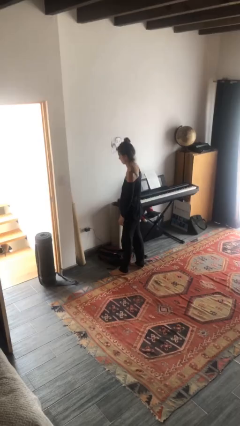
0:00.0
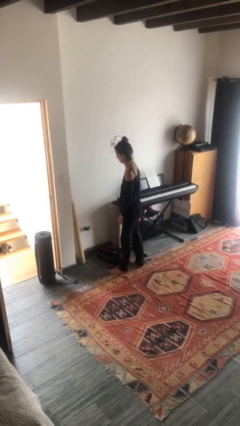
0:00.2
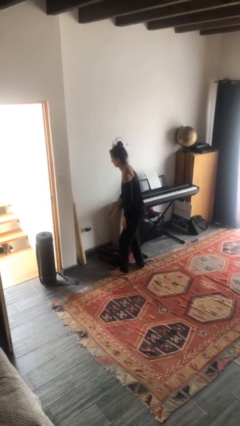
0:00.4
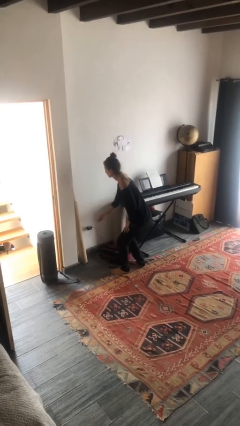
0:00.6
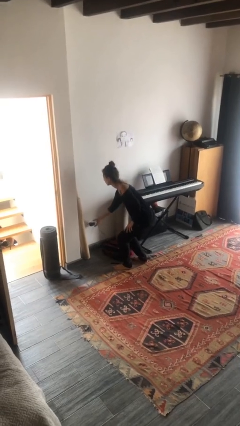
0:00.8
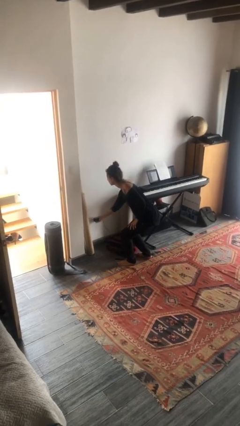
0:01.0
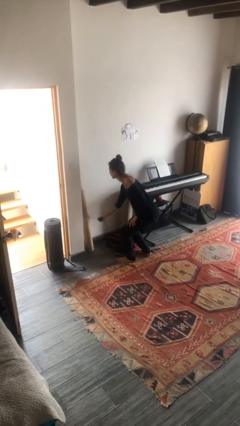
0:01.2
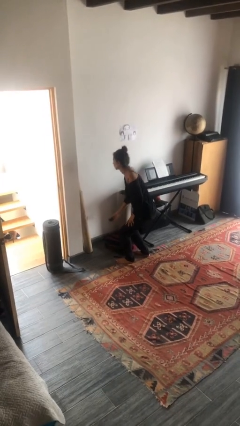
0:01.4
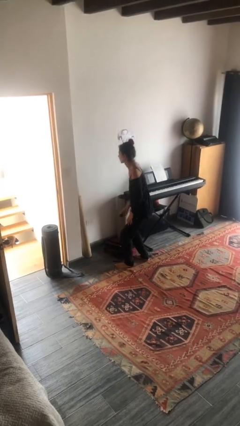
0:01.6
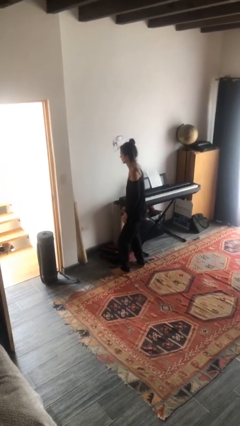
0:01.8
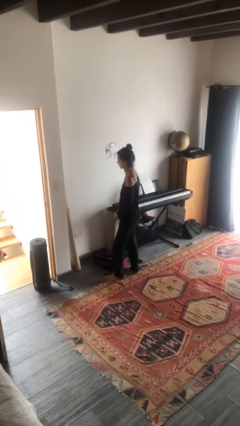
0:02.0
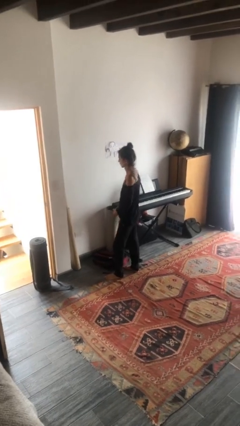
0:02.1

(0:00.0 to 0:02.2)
person unplugs from electrical socket

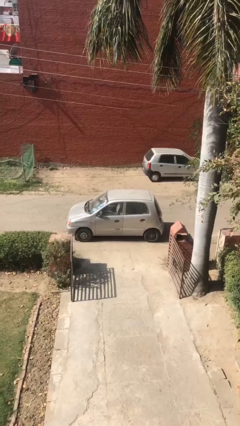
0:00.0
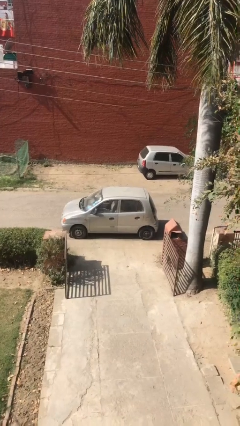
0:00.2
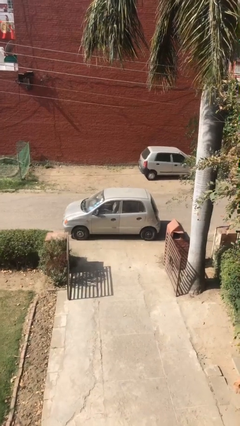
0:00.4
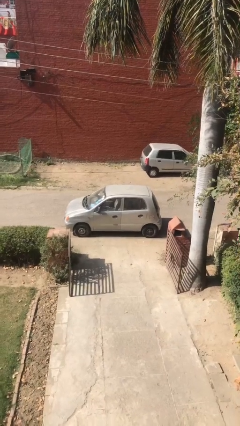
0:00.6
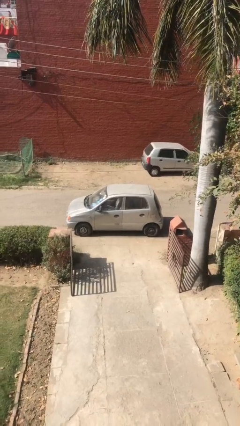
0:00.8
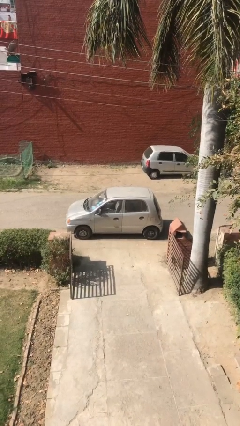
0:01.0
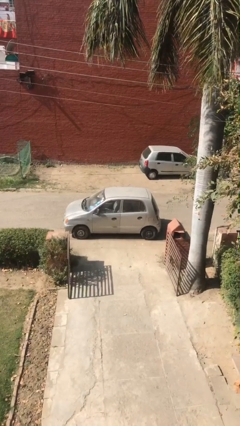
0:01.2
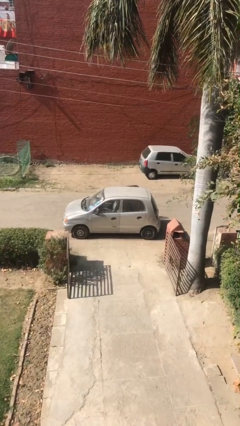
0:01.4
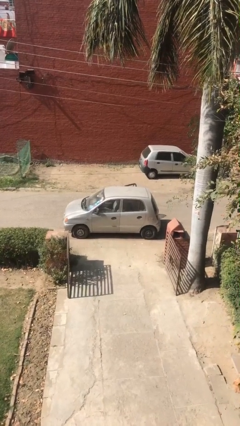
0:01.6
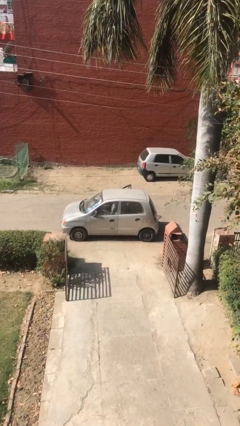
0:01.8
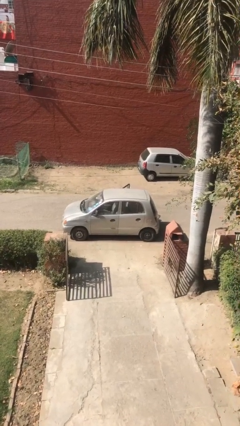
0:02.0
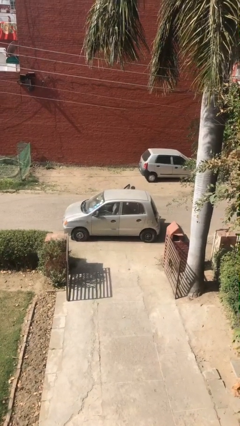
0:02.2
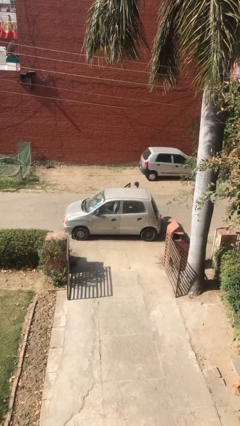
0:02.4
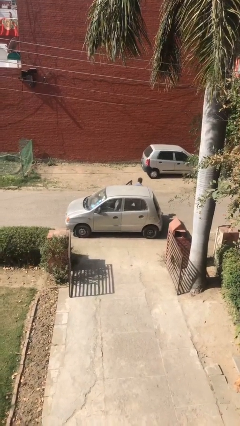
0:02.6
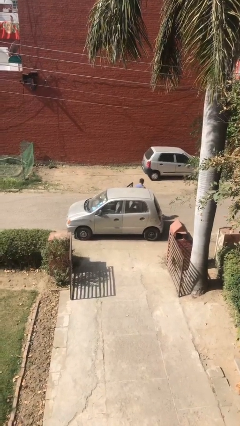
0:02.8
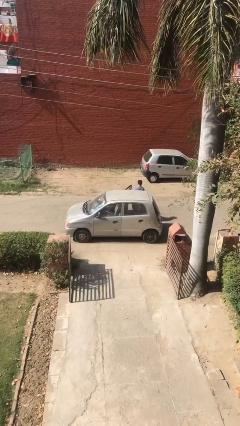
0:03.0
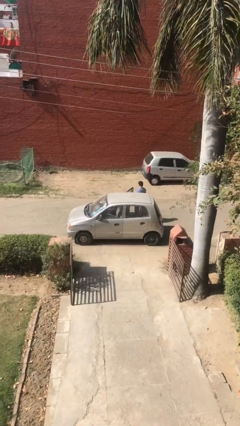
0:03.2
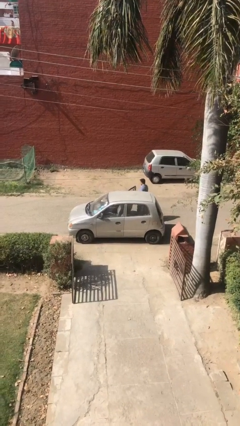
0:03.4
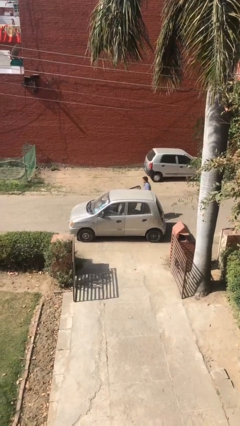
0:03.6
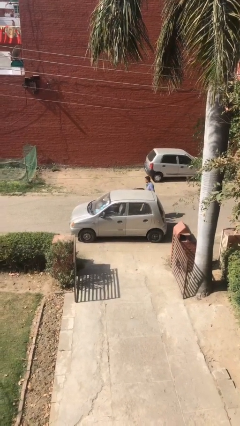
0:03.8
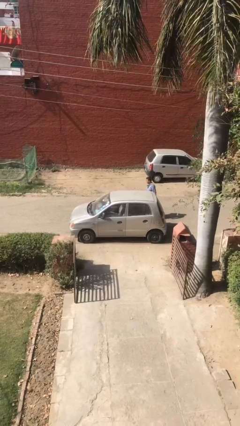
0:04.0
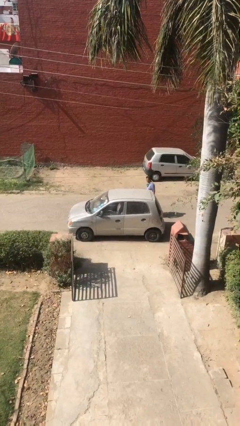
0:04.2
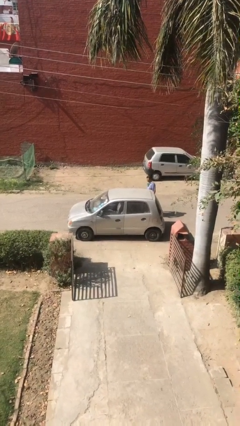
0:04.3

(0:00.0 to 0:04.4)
car drops off person

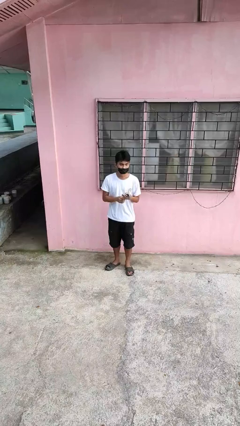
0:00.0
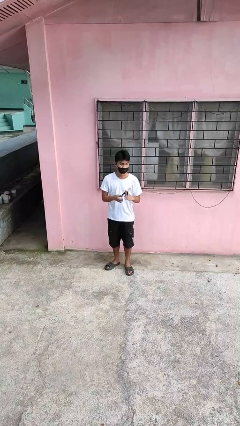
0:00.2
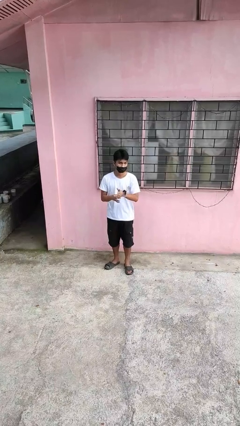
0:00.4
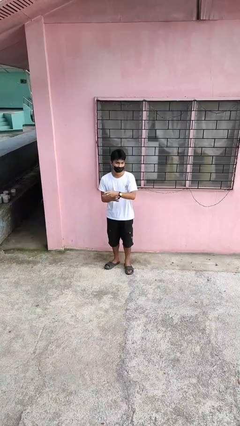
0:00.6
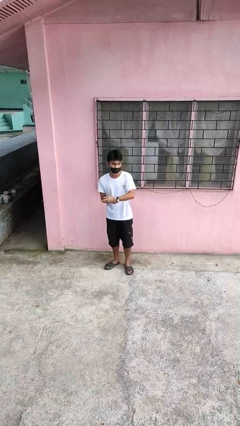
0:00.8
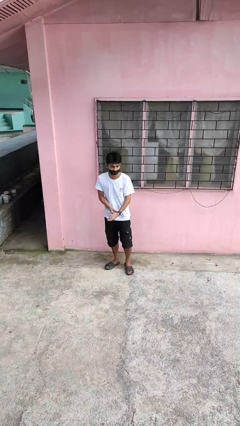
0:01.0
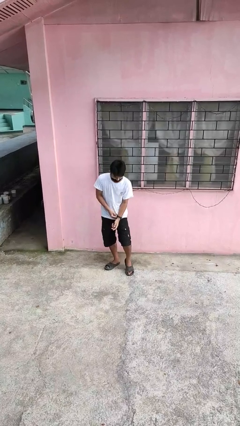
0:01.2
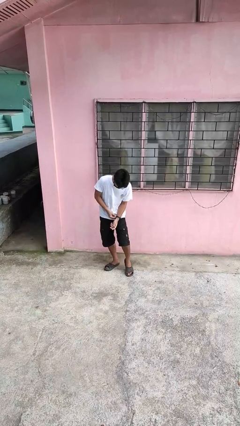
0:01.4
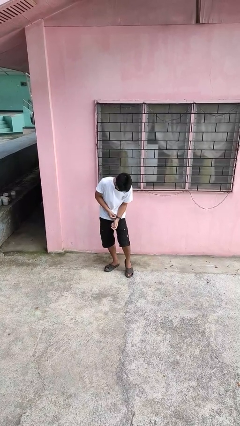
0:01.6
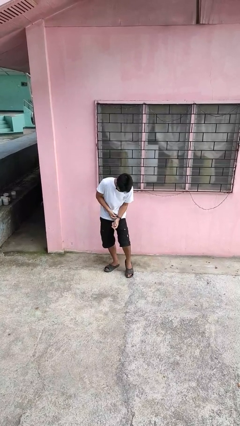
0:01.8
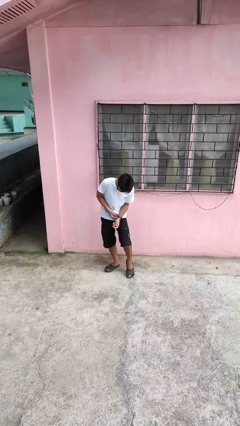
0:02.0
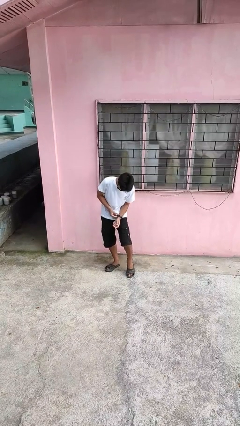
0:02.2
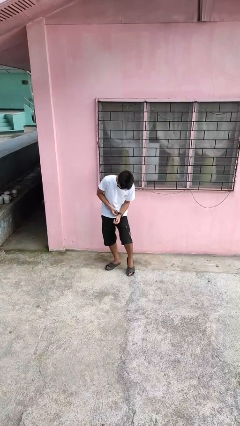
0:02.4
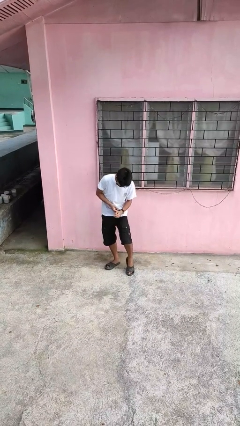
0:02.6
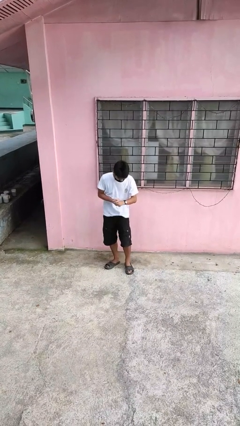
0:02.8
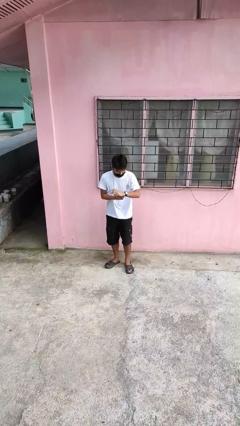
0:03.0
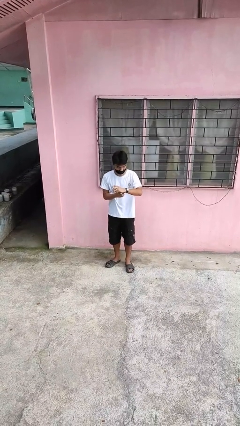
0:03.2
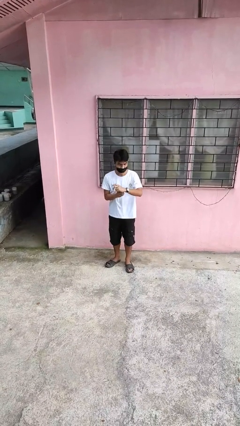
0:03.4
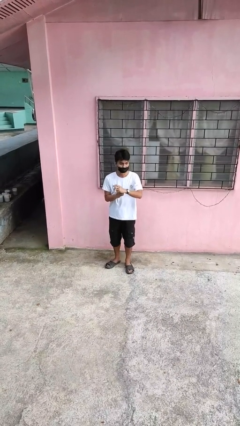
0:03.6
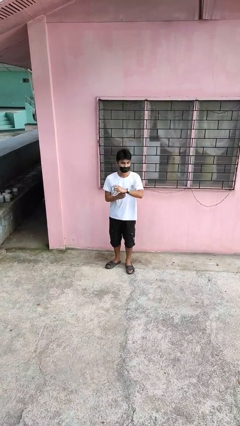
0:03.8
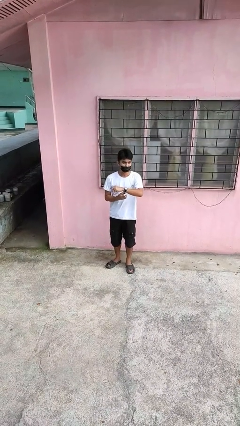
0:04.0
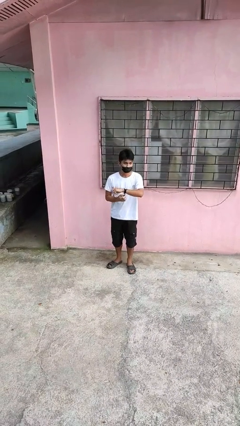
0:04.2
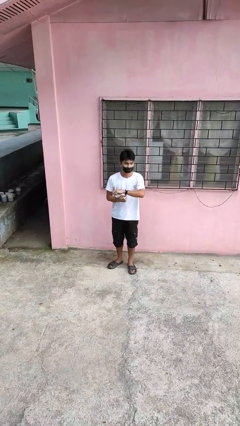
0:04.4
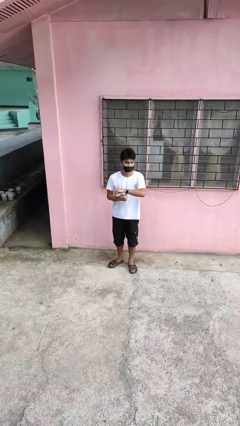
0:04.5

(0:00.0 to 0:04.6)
person puts on wristwatch

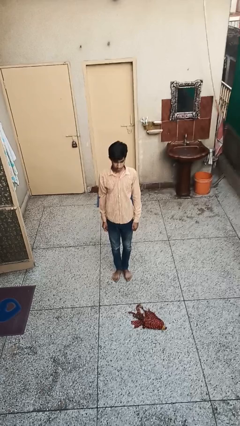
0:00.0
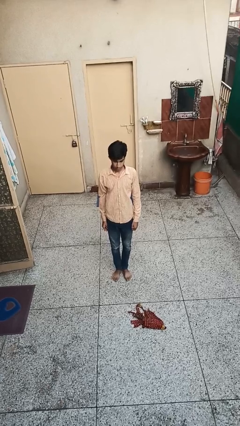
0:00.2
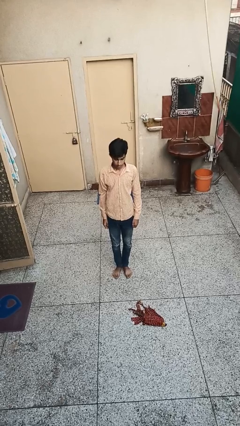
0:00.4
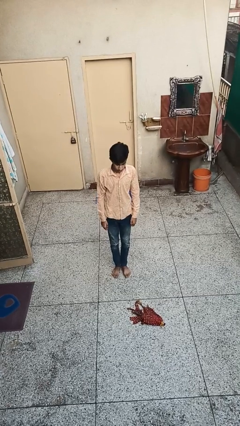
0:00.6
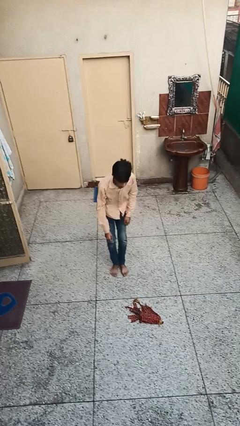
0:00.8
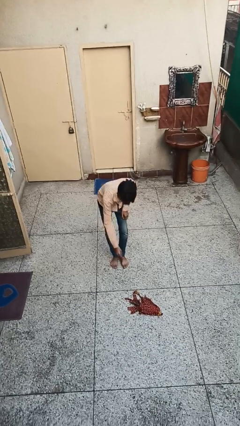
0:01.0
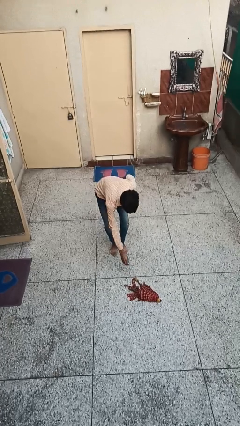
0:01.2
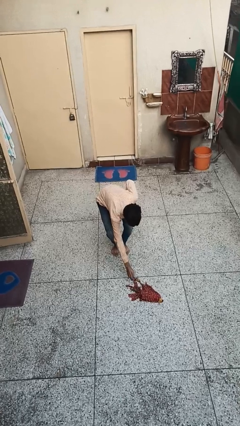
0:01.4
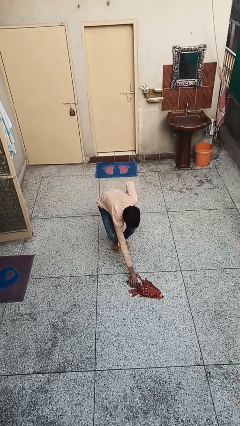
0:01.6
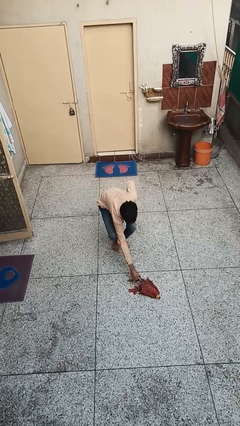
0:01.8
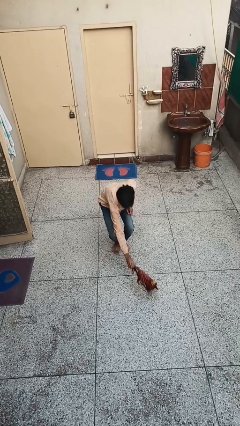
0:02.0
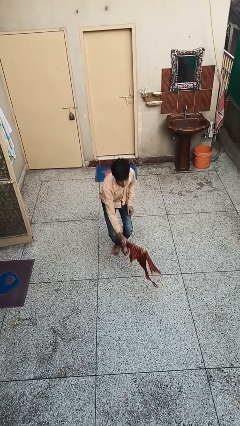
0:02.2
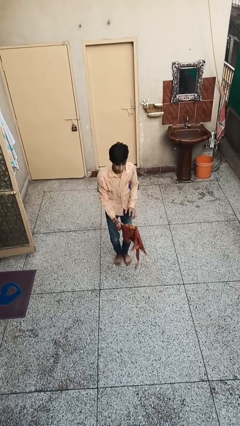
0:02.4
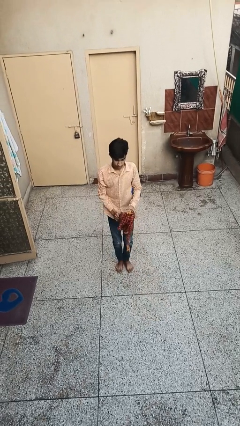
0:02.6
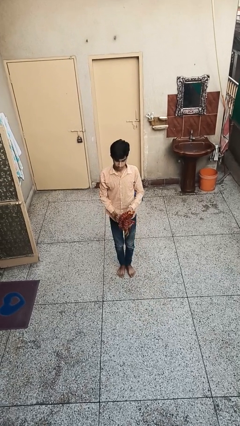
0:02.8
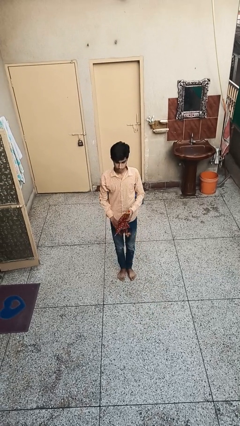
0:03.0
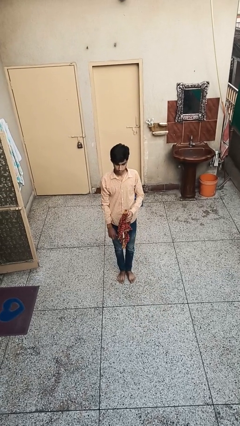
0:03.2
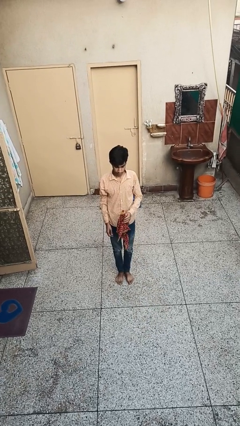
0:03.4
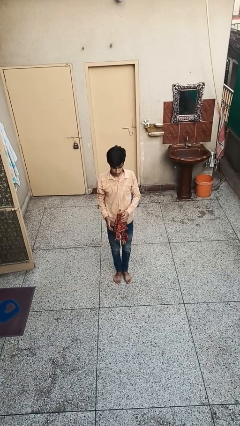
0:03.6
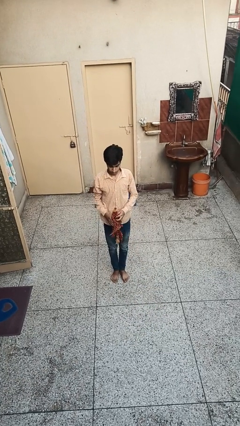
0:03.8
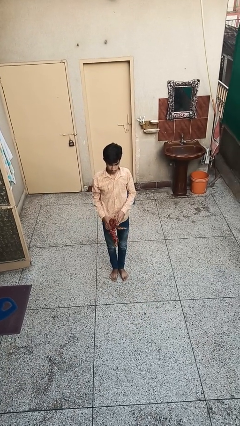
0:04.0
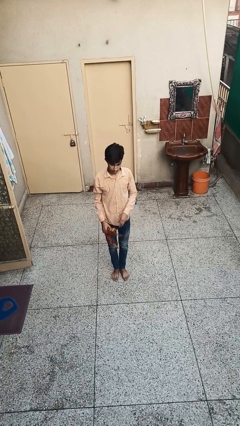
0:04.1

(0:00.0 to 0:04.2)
person picks up object from floor

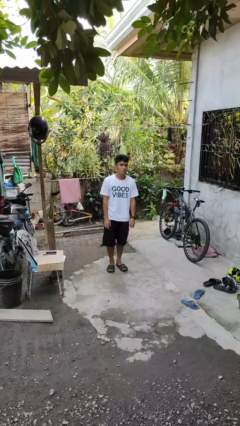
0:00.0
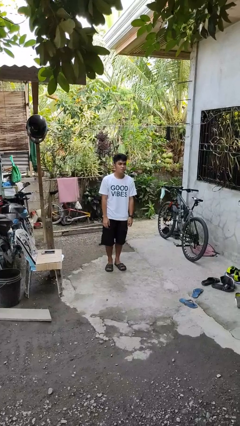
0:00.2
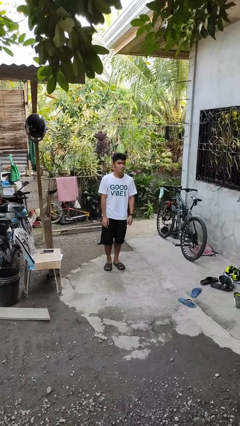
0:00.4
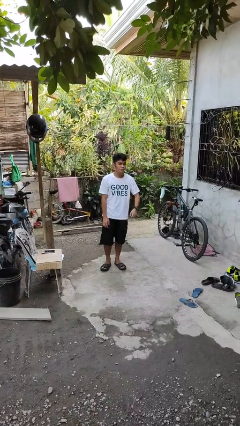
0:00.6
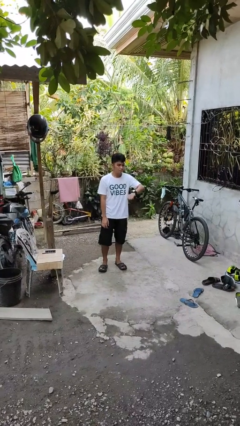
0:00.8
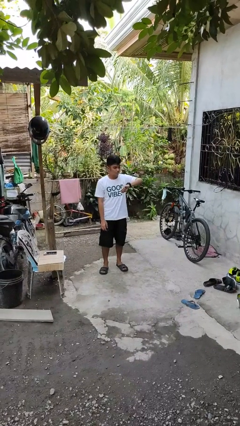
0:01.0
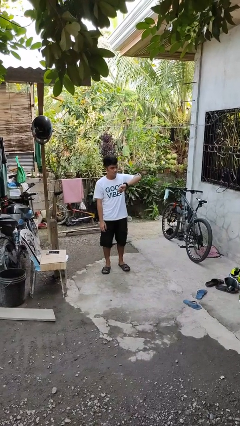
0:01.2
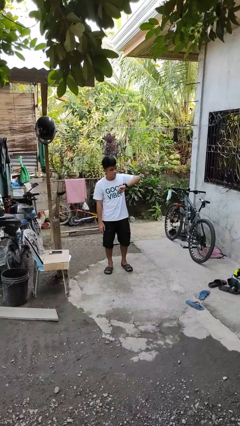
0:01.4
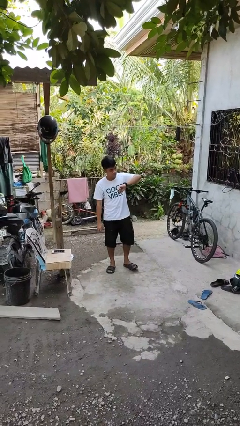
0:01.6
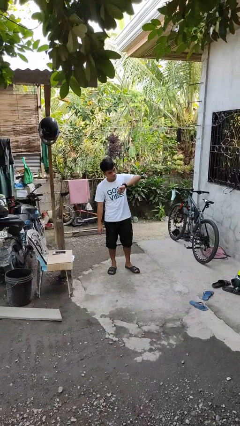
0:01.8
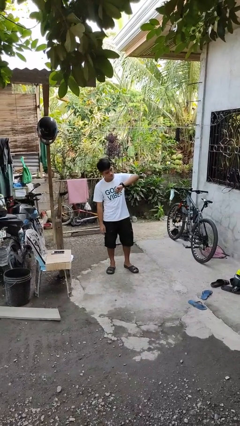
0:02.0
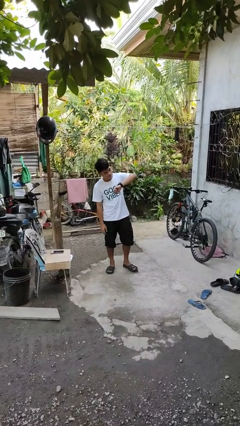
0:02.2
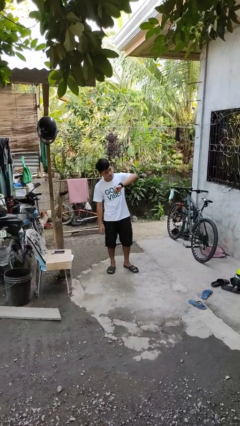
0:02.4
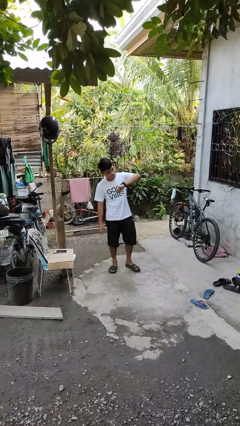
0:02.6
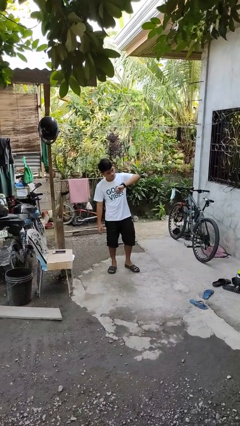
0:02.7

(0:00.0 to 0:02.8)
person looks at wristwatch
